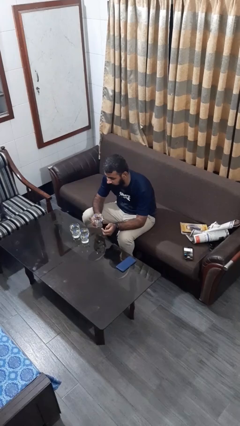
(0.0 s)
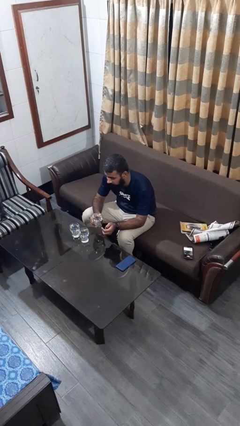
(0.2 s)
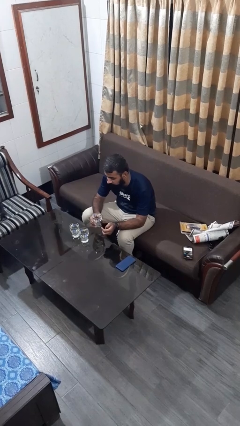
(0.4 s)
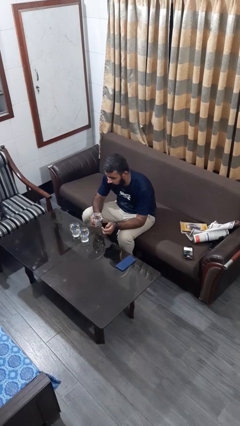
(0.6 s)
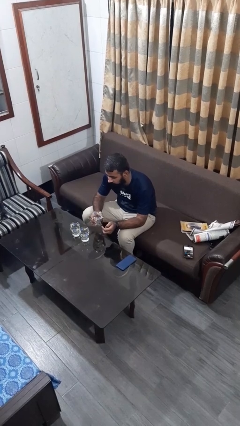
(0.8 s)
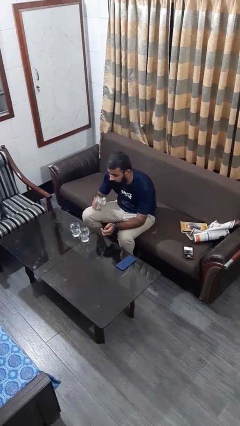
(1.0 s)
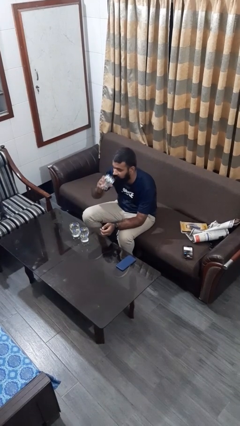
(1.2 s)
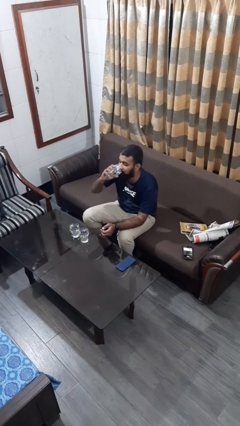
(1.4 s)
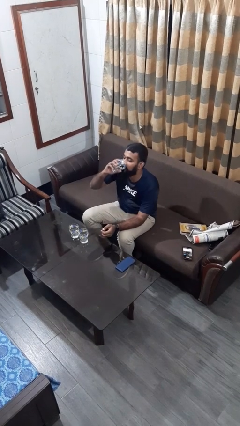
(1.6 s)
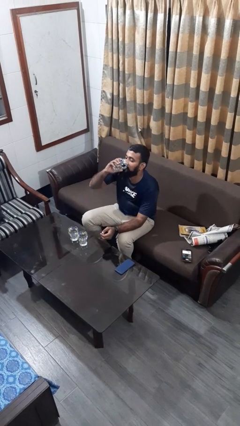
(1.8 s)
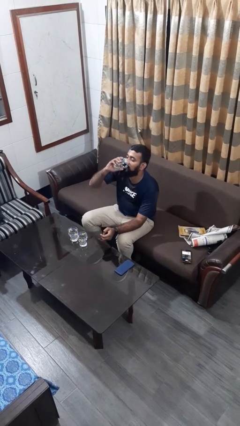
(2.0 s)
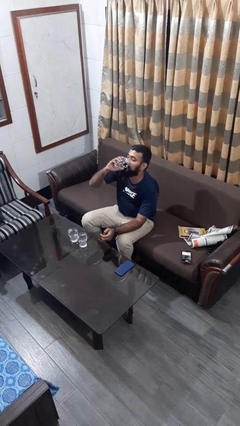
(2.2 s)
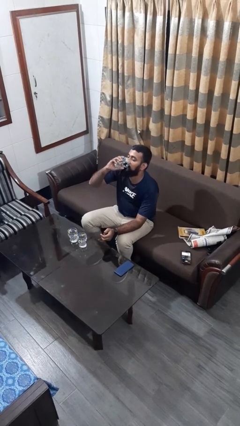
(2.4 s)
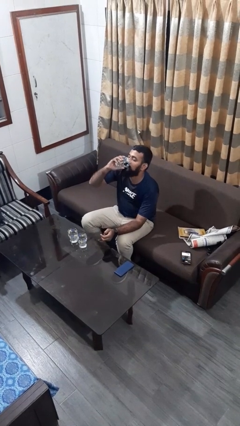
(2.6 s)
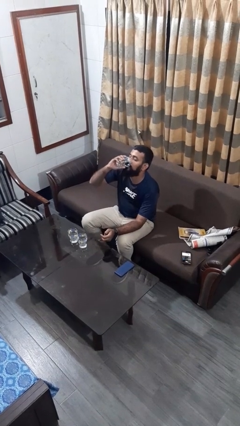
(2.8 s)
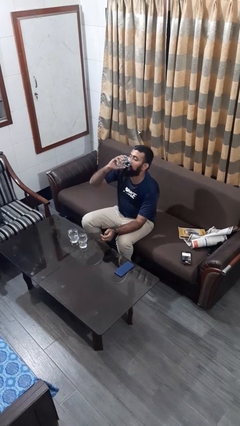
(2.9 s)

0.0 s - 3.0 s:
person drinks from shotglass

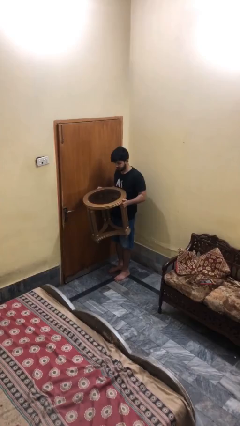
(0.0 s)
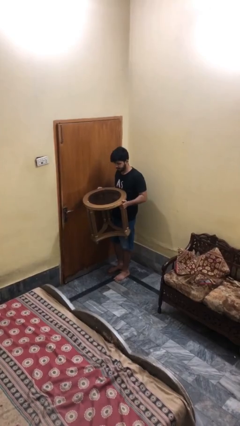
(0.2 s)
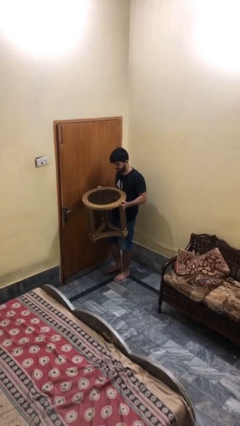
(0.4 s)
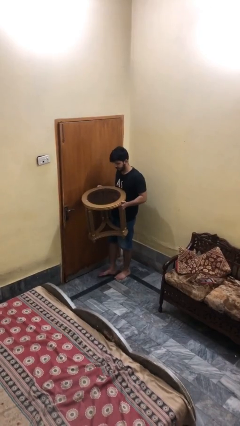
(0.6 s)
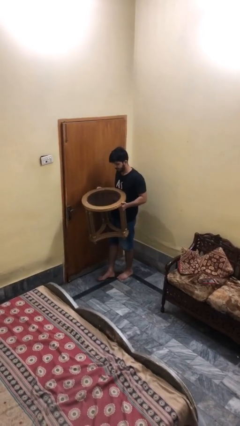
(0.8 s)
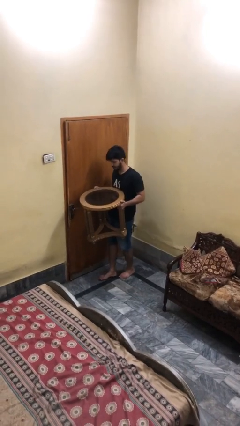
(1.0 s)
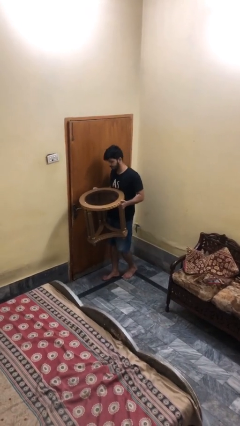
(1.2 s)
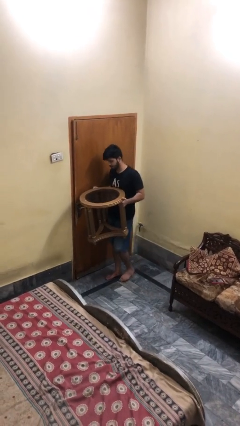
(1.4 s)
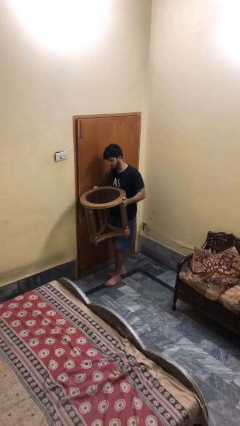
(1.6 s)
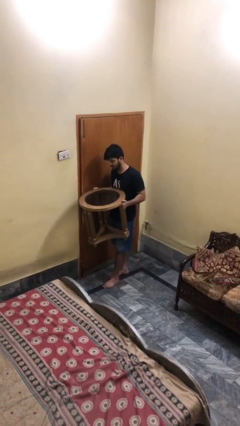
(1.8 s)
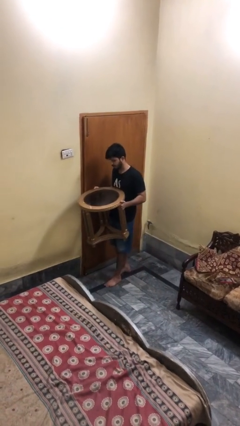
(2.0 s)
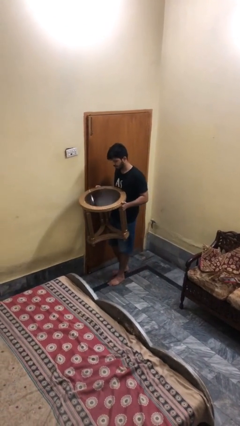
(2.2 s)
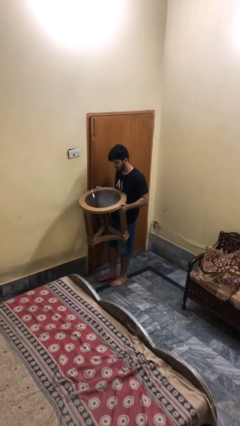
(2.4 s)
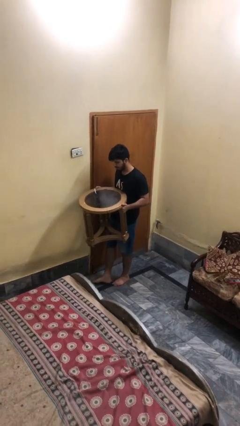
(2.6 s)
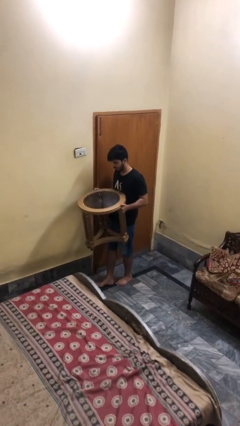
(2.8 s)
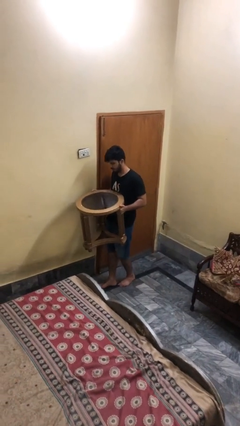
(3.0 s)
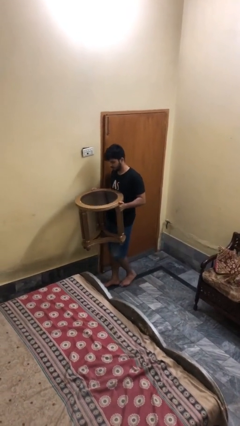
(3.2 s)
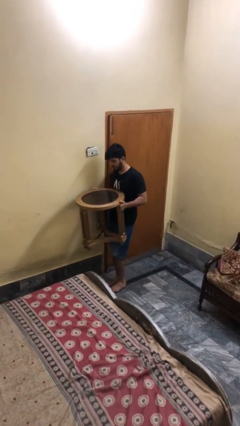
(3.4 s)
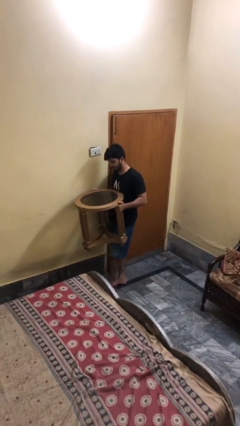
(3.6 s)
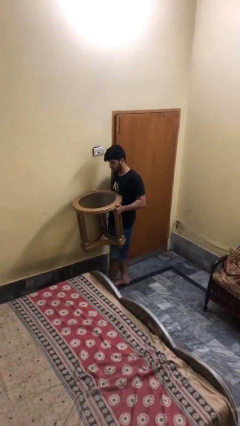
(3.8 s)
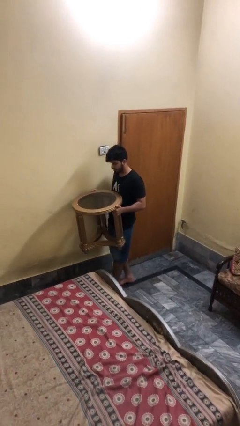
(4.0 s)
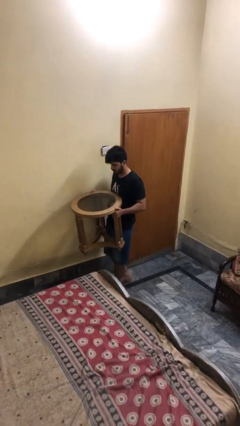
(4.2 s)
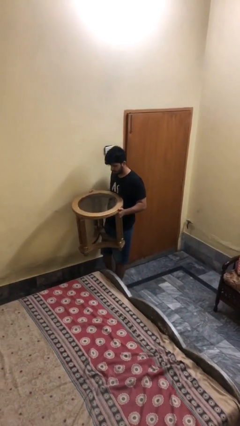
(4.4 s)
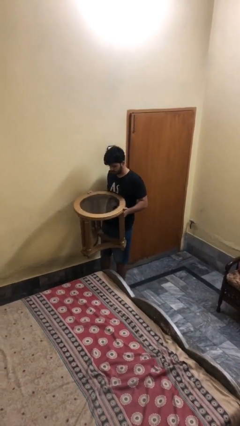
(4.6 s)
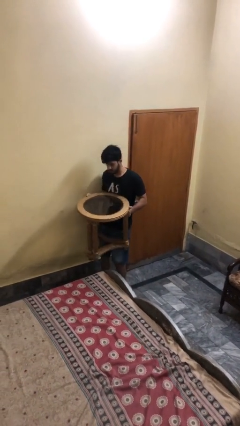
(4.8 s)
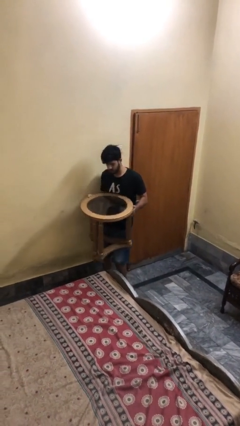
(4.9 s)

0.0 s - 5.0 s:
person carries furniture

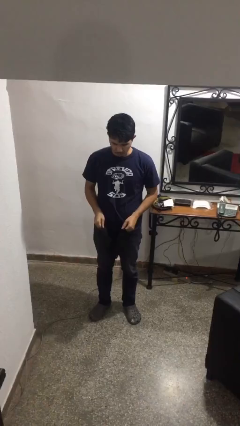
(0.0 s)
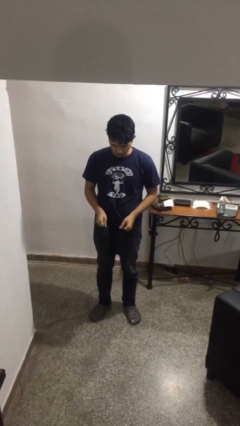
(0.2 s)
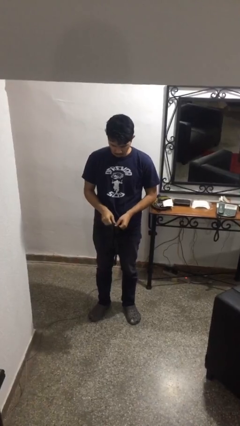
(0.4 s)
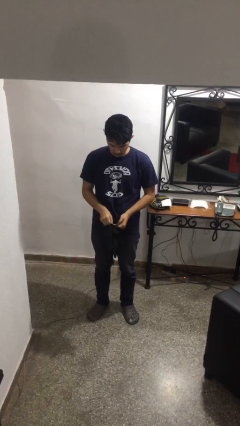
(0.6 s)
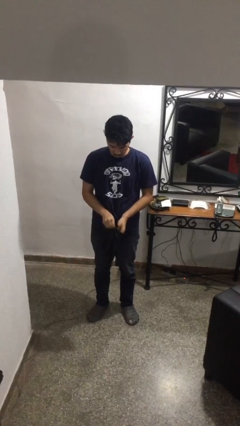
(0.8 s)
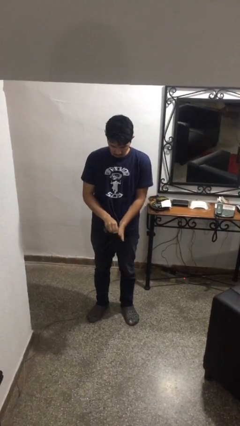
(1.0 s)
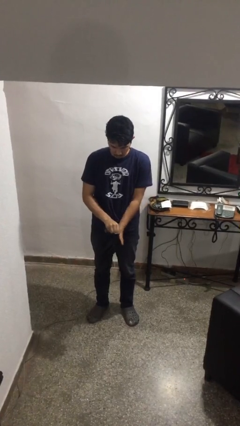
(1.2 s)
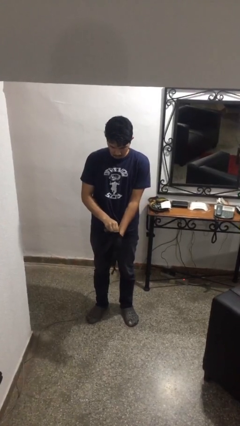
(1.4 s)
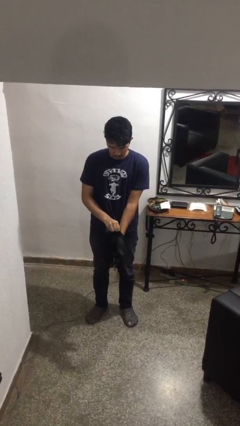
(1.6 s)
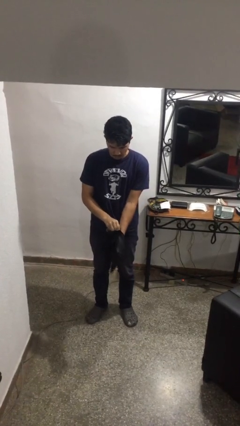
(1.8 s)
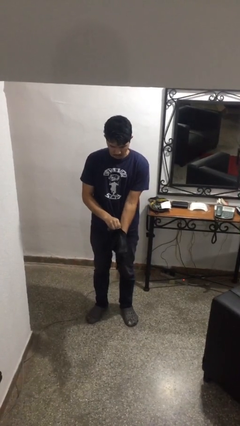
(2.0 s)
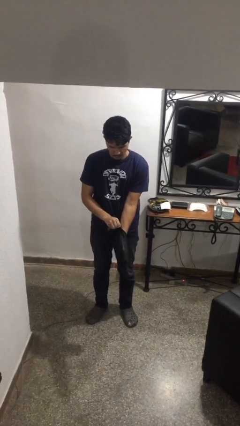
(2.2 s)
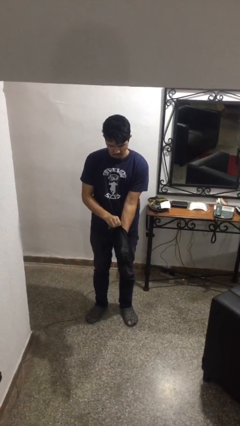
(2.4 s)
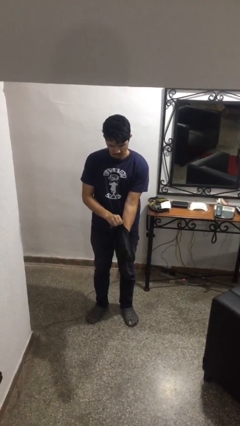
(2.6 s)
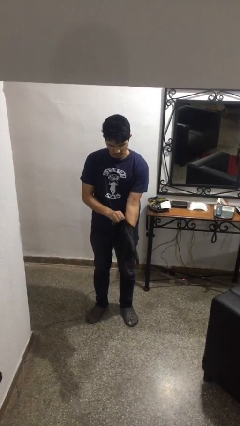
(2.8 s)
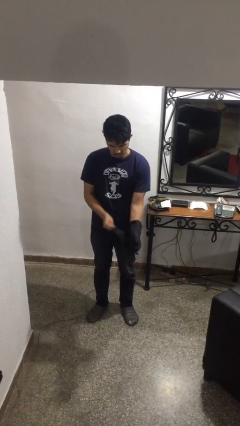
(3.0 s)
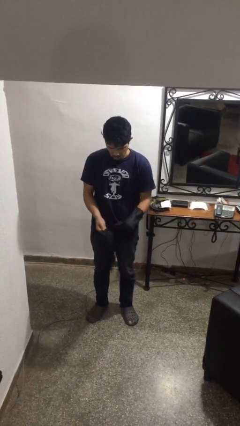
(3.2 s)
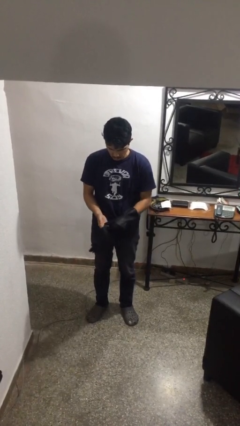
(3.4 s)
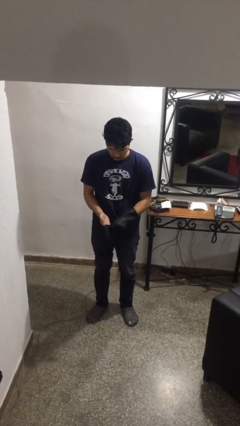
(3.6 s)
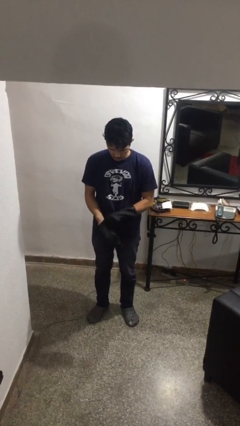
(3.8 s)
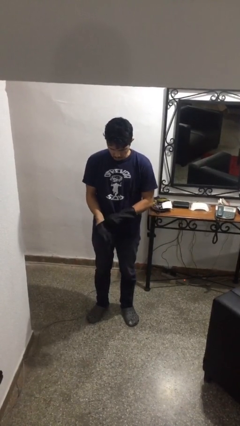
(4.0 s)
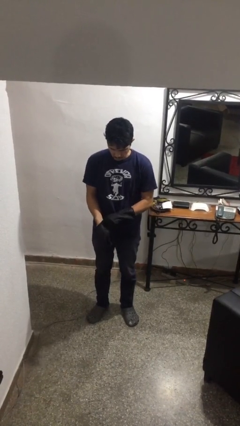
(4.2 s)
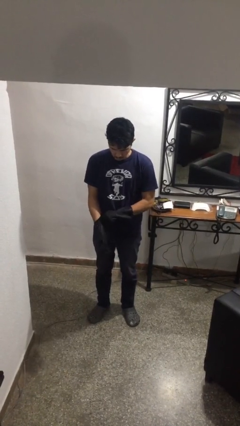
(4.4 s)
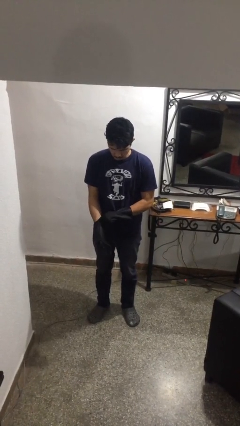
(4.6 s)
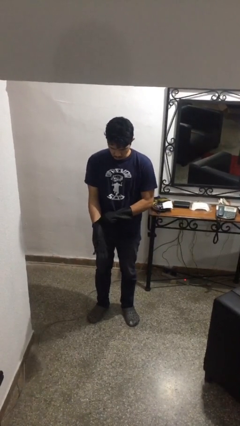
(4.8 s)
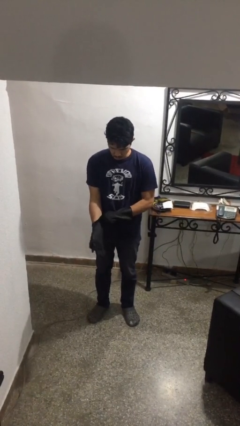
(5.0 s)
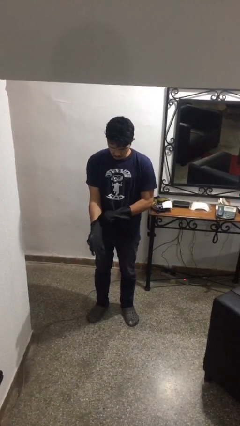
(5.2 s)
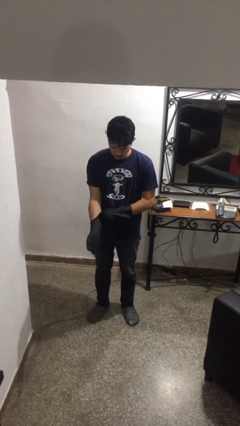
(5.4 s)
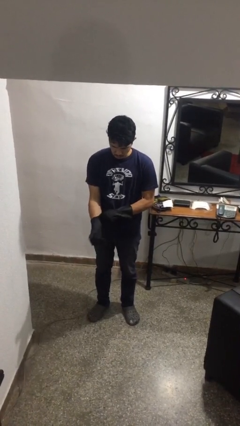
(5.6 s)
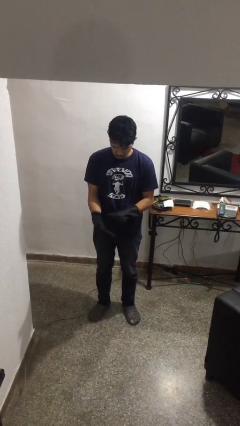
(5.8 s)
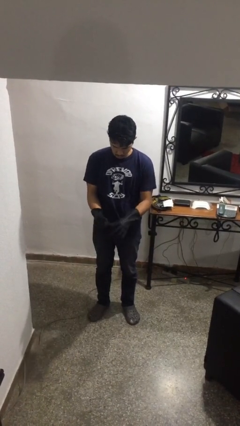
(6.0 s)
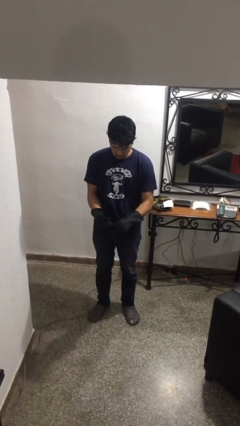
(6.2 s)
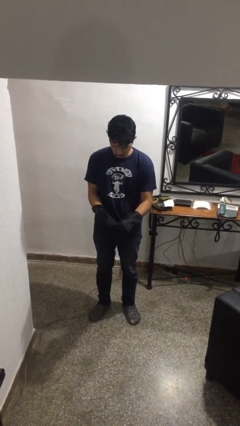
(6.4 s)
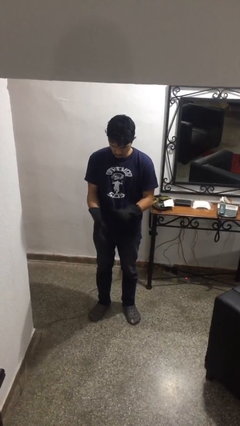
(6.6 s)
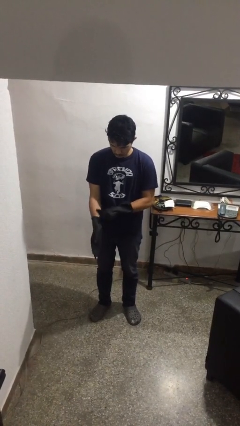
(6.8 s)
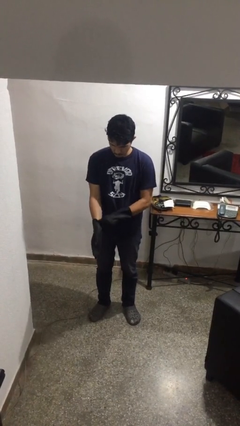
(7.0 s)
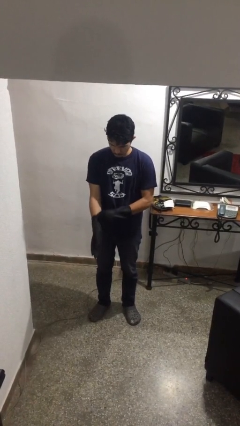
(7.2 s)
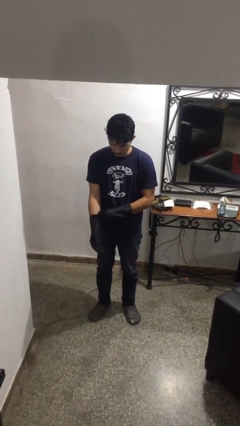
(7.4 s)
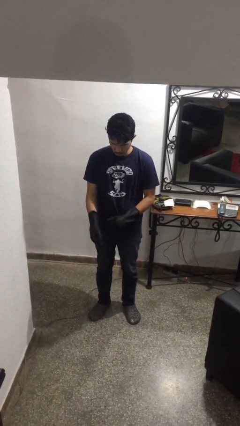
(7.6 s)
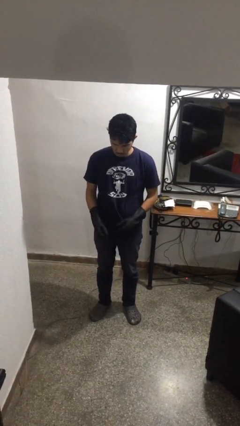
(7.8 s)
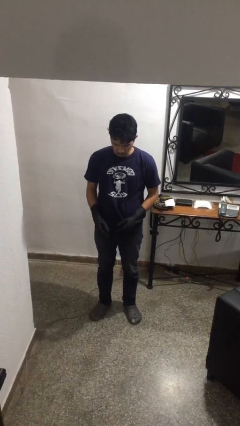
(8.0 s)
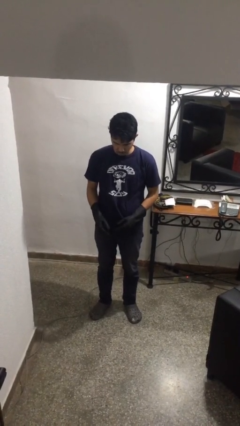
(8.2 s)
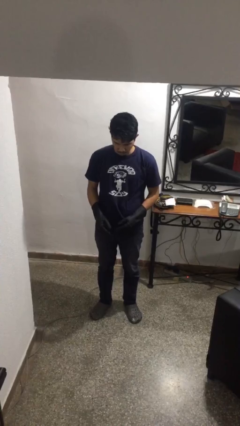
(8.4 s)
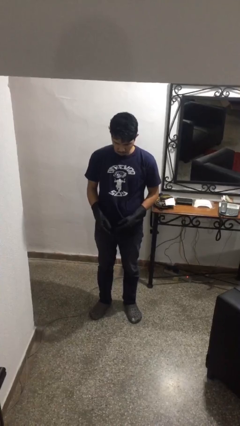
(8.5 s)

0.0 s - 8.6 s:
person puts on gloves

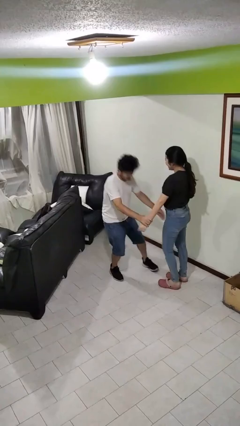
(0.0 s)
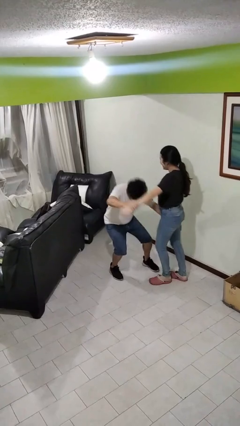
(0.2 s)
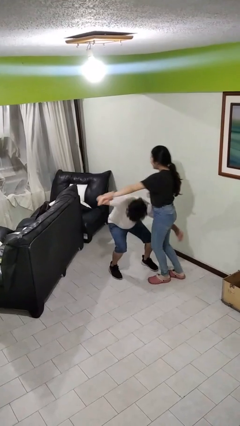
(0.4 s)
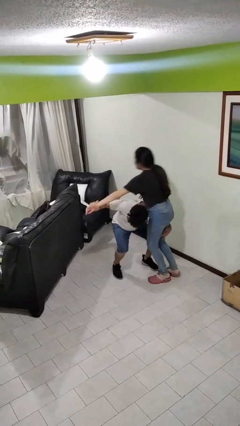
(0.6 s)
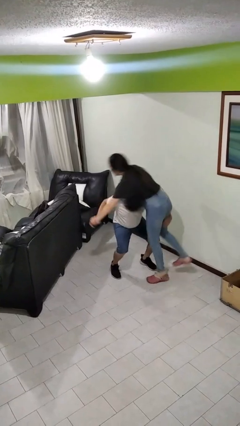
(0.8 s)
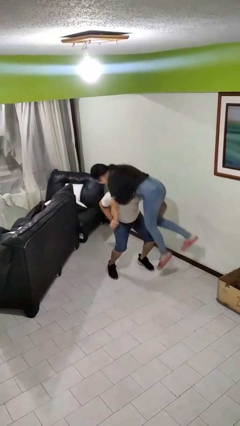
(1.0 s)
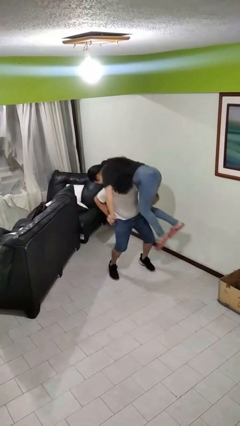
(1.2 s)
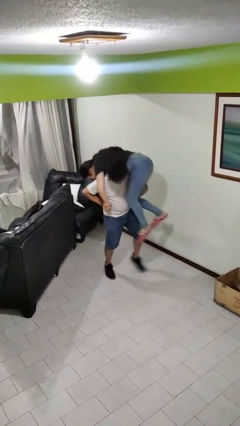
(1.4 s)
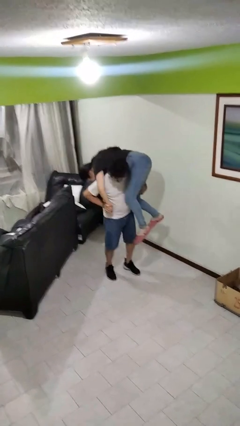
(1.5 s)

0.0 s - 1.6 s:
person carries person over shoulder
